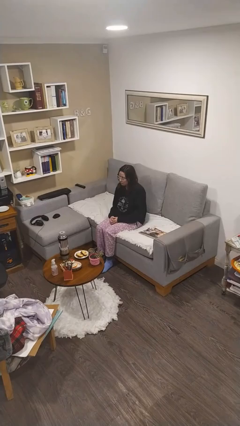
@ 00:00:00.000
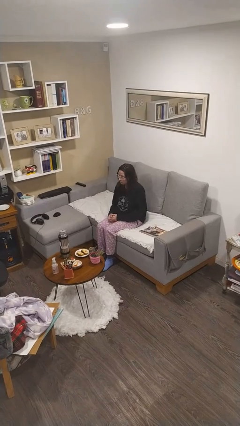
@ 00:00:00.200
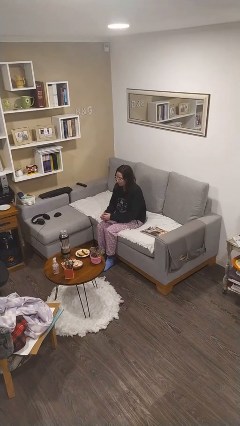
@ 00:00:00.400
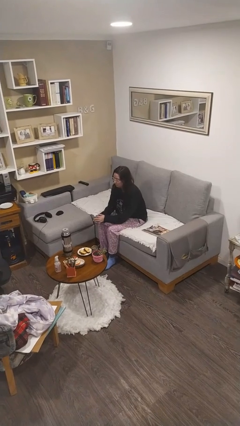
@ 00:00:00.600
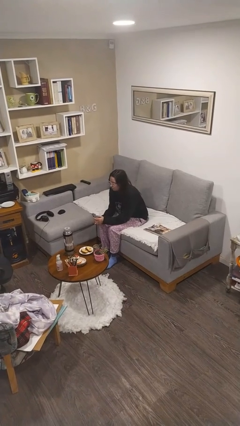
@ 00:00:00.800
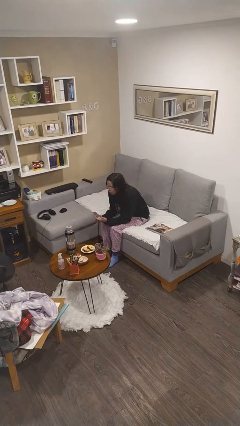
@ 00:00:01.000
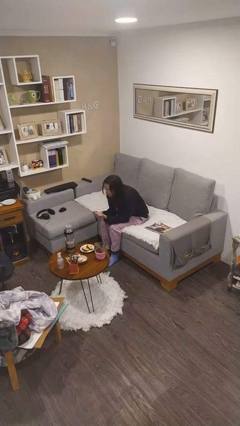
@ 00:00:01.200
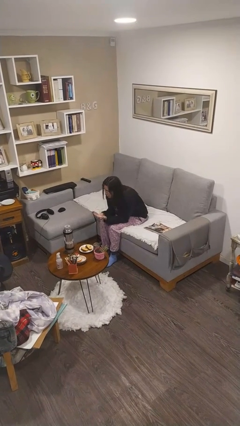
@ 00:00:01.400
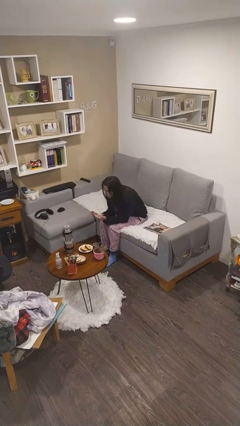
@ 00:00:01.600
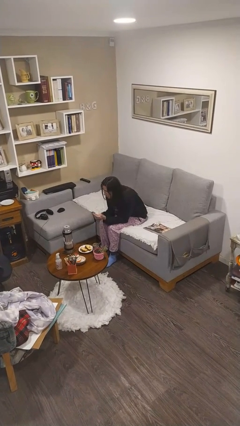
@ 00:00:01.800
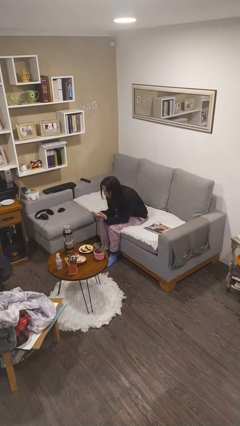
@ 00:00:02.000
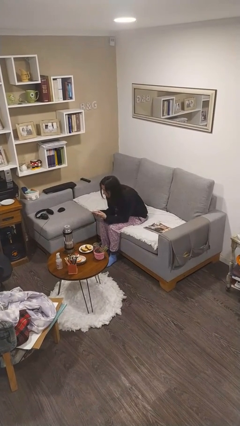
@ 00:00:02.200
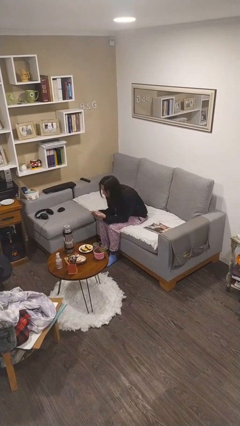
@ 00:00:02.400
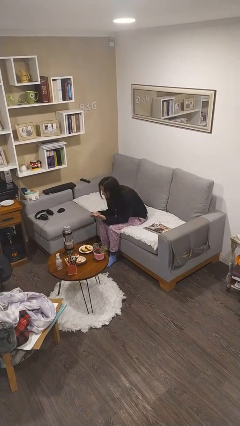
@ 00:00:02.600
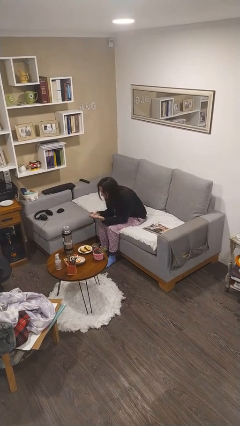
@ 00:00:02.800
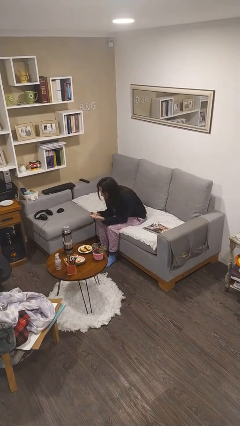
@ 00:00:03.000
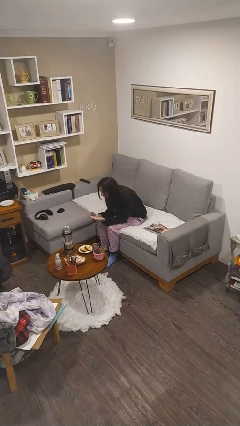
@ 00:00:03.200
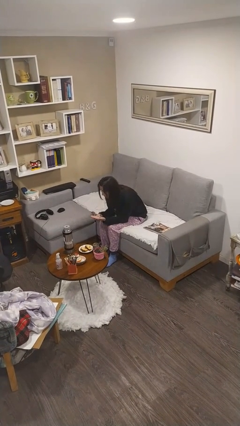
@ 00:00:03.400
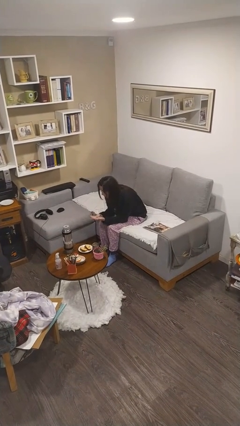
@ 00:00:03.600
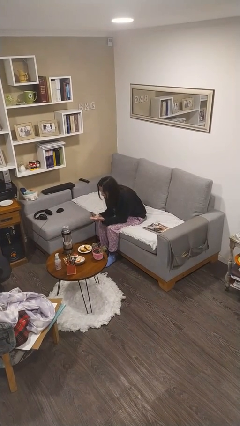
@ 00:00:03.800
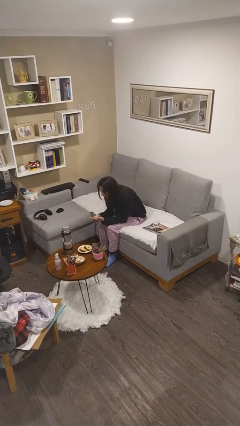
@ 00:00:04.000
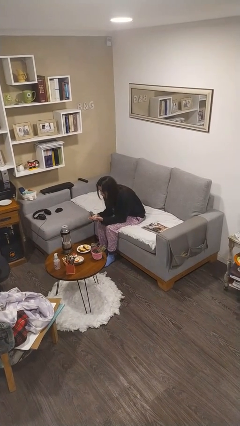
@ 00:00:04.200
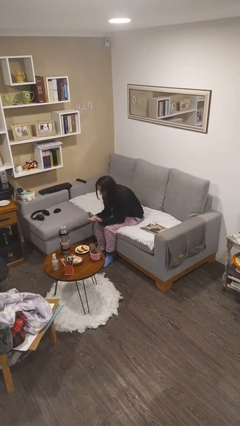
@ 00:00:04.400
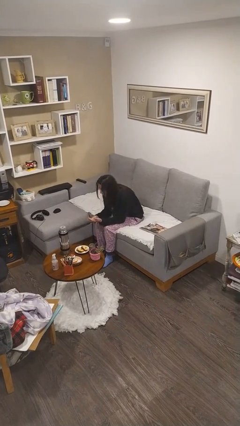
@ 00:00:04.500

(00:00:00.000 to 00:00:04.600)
person looks at hands in lap

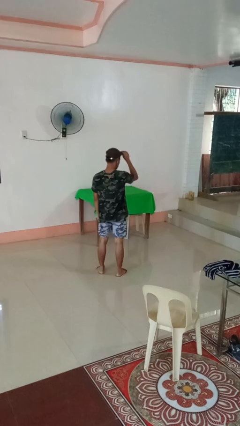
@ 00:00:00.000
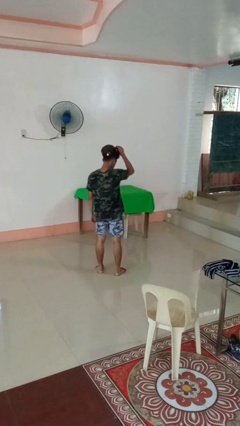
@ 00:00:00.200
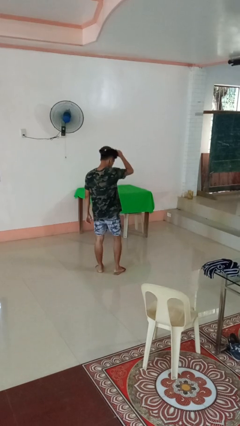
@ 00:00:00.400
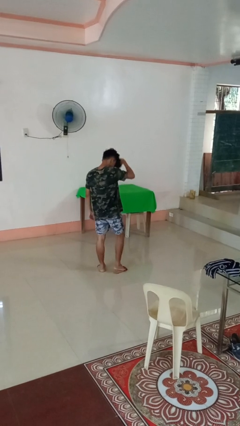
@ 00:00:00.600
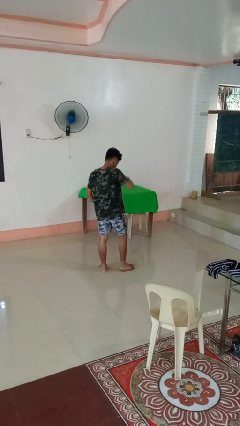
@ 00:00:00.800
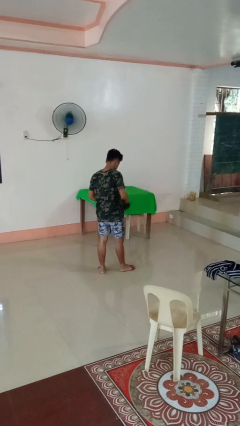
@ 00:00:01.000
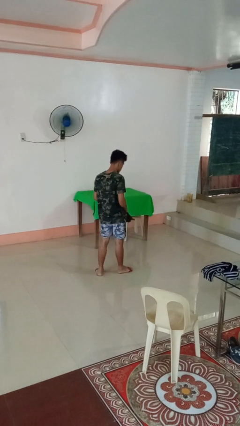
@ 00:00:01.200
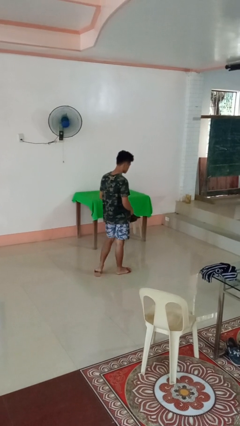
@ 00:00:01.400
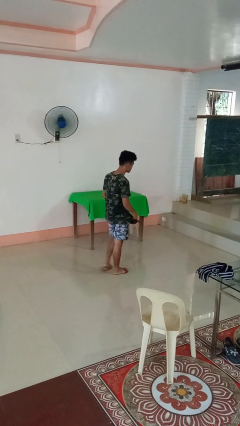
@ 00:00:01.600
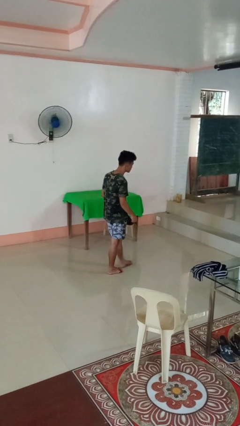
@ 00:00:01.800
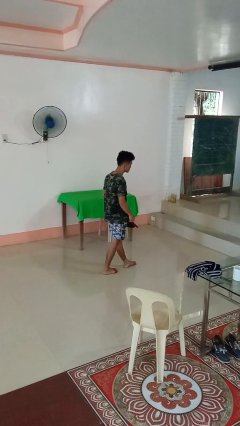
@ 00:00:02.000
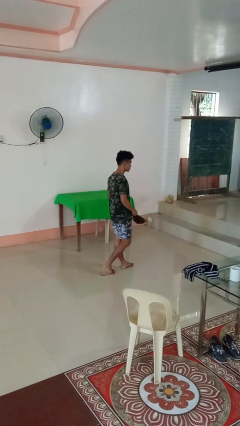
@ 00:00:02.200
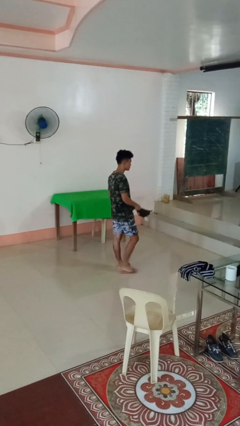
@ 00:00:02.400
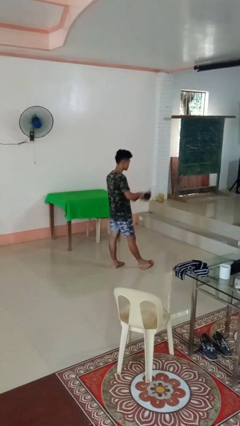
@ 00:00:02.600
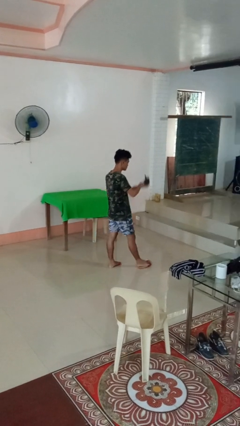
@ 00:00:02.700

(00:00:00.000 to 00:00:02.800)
person takes off hat

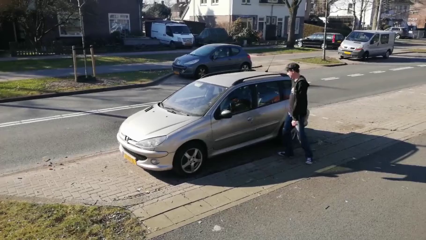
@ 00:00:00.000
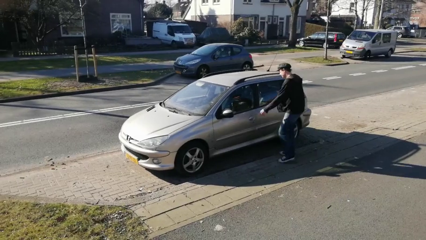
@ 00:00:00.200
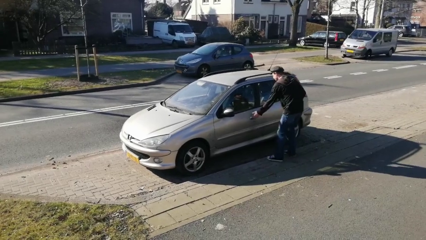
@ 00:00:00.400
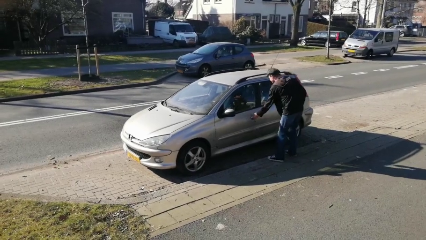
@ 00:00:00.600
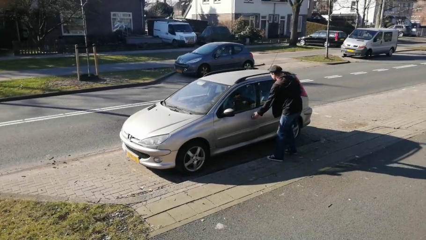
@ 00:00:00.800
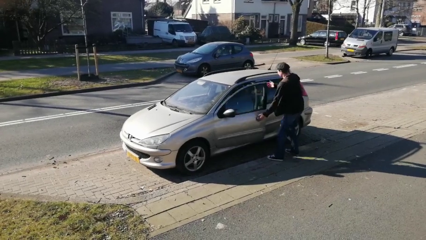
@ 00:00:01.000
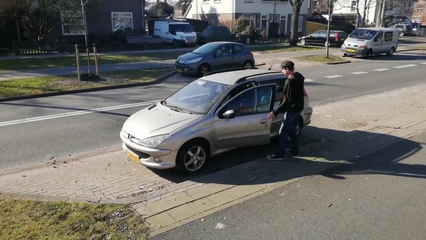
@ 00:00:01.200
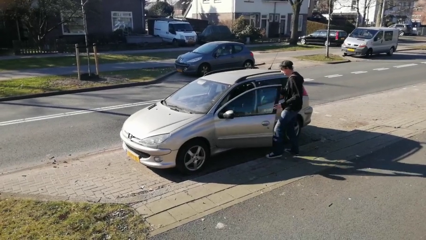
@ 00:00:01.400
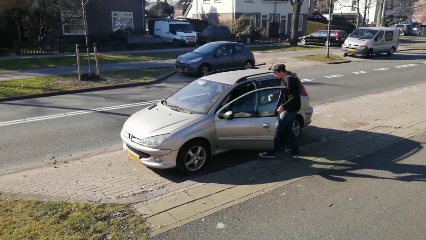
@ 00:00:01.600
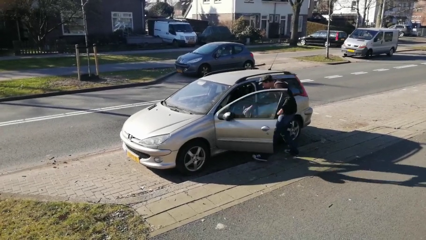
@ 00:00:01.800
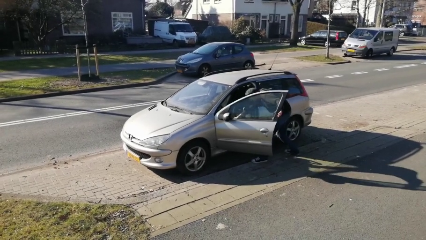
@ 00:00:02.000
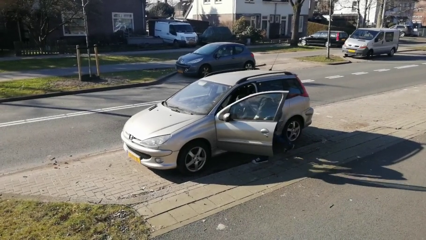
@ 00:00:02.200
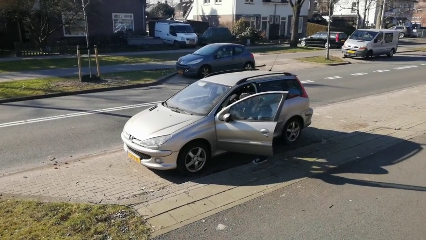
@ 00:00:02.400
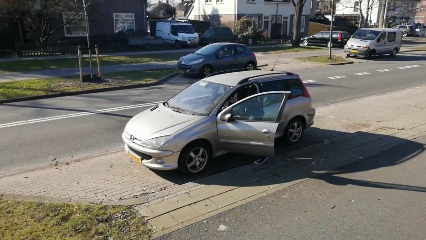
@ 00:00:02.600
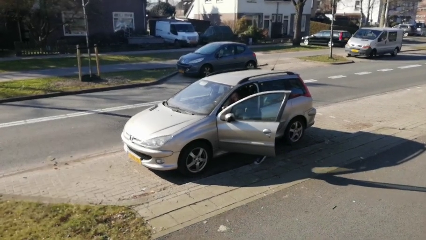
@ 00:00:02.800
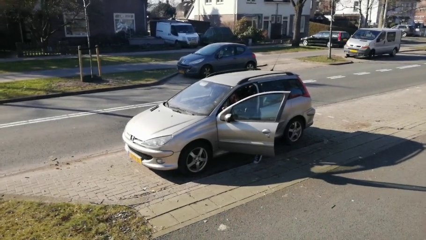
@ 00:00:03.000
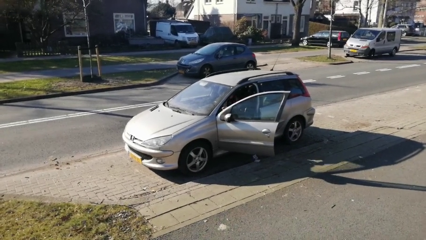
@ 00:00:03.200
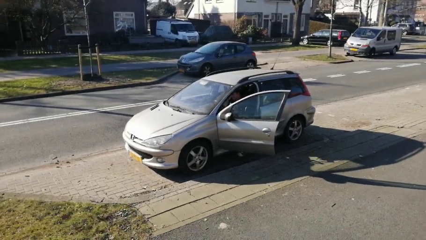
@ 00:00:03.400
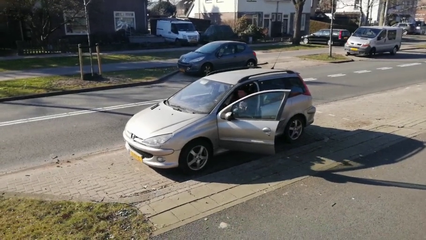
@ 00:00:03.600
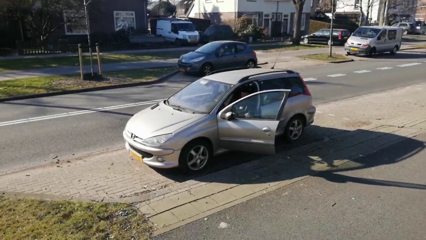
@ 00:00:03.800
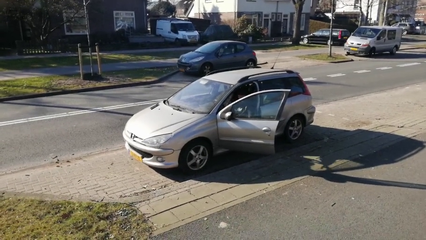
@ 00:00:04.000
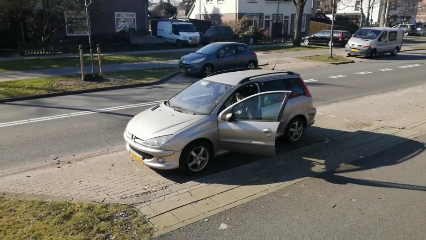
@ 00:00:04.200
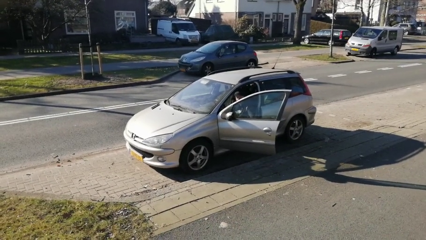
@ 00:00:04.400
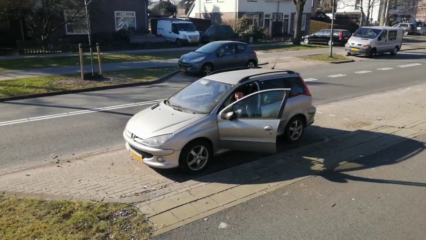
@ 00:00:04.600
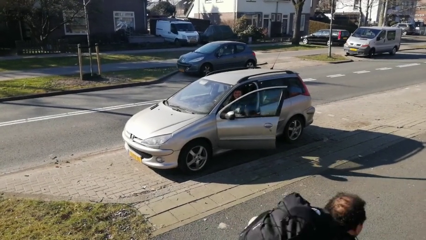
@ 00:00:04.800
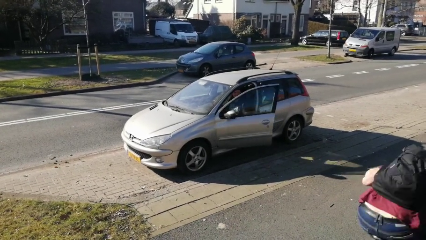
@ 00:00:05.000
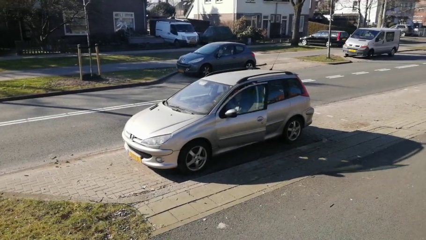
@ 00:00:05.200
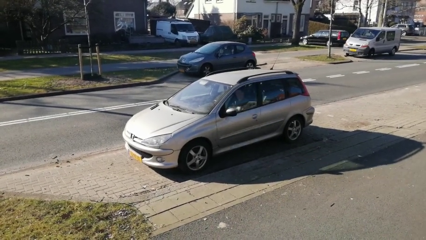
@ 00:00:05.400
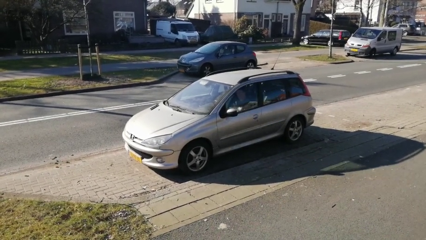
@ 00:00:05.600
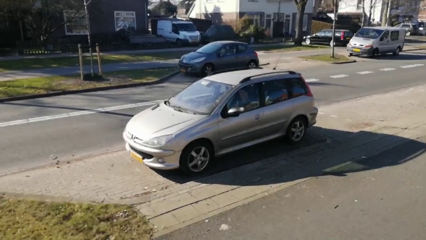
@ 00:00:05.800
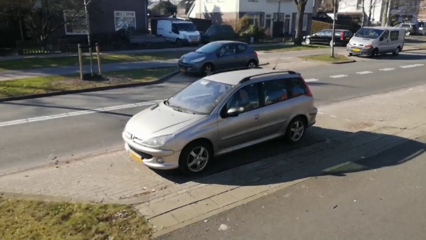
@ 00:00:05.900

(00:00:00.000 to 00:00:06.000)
car picks up person

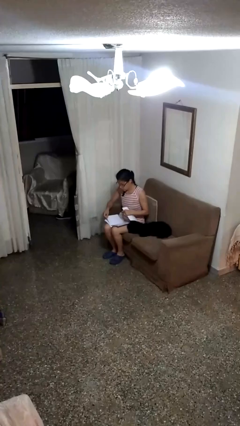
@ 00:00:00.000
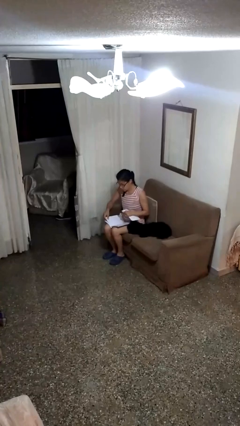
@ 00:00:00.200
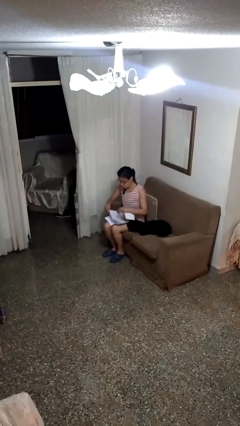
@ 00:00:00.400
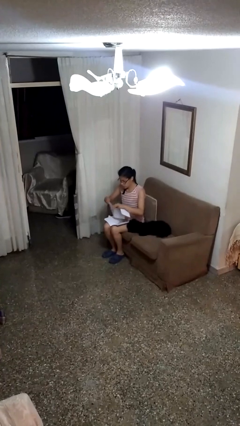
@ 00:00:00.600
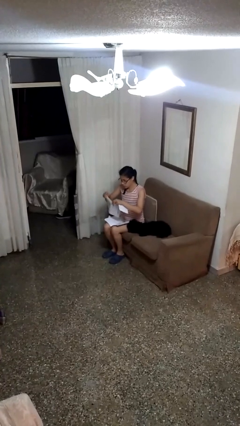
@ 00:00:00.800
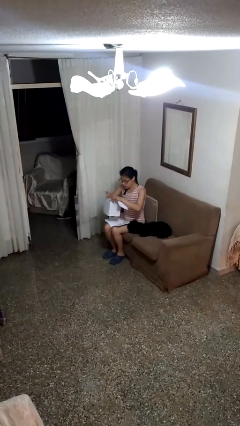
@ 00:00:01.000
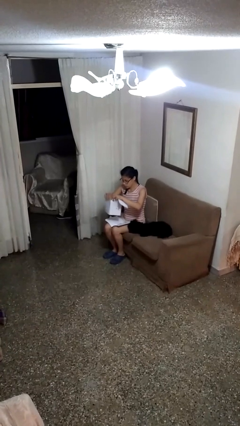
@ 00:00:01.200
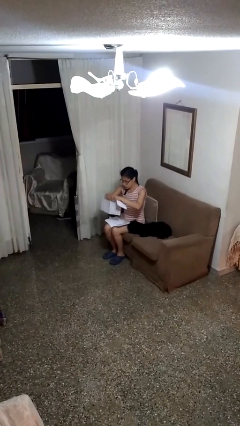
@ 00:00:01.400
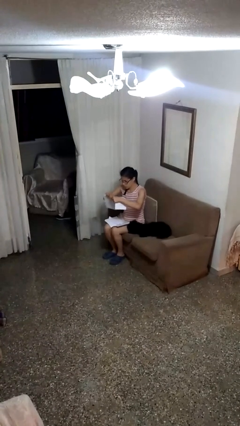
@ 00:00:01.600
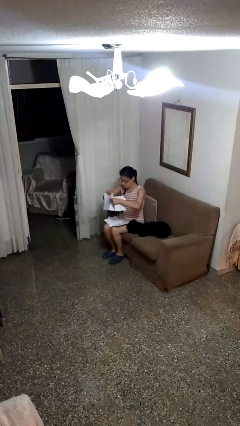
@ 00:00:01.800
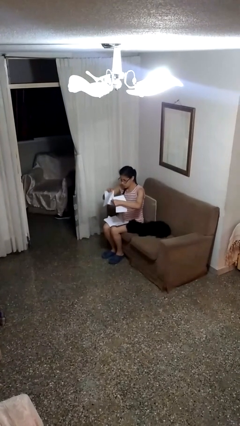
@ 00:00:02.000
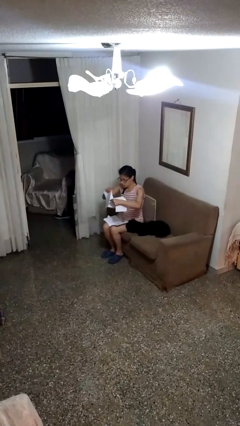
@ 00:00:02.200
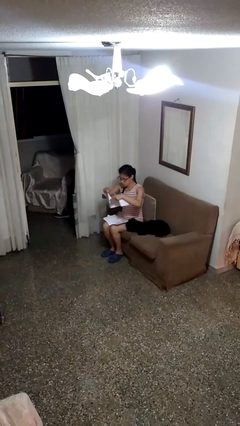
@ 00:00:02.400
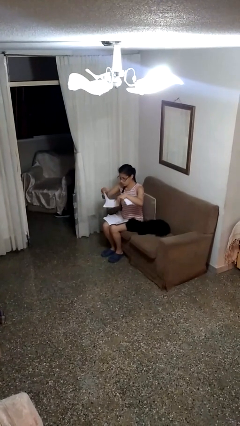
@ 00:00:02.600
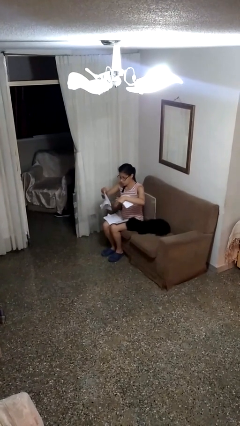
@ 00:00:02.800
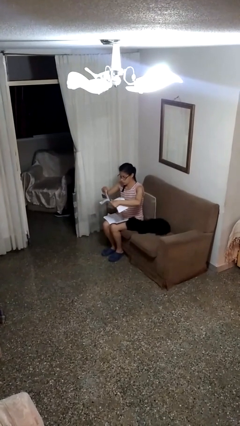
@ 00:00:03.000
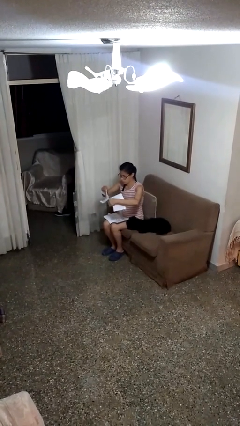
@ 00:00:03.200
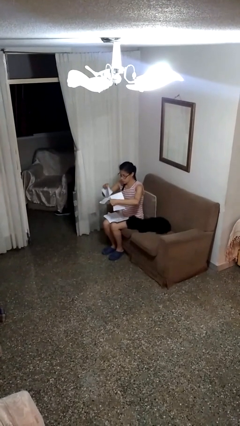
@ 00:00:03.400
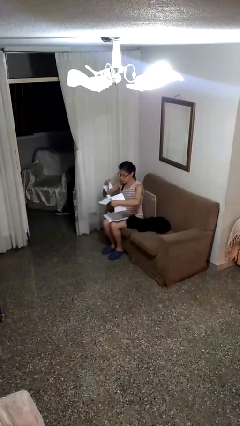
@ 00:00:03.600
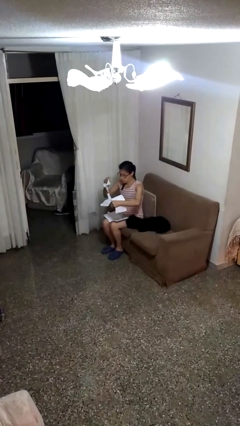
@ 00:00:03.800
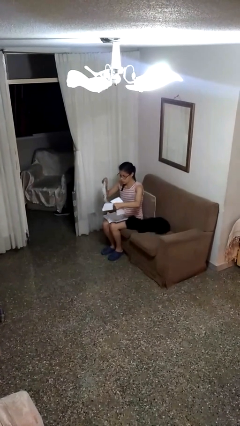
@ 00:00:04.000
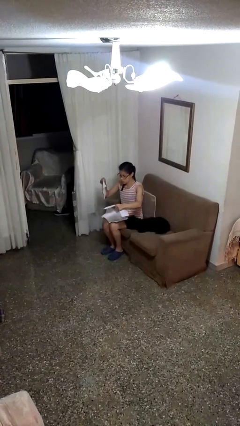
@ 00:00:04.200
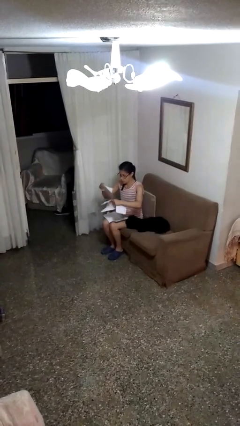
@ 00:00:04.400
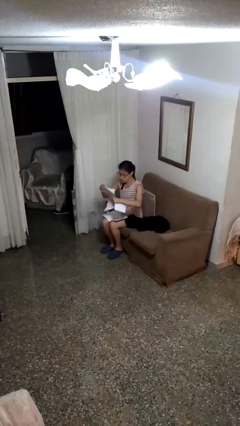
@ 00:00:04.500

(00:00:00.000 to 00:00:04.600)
person tears paper
